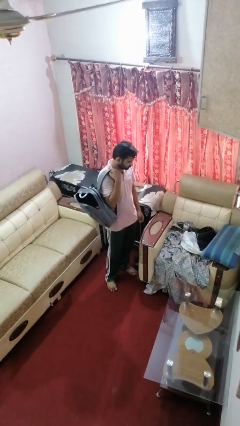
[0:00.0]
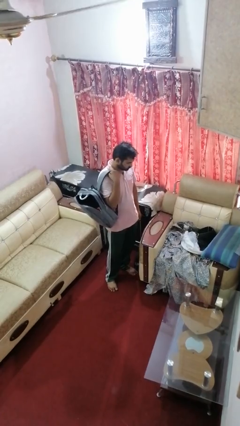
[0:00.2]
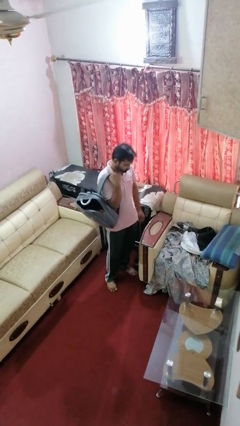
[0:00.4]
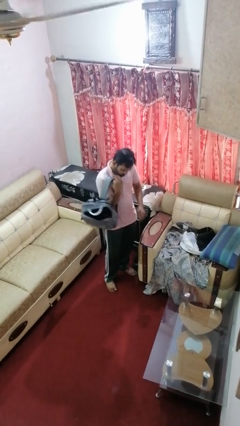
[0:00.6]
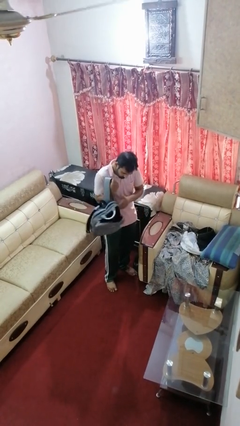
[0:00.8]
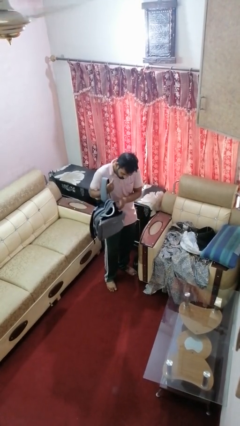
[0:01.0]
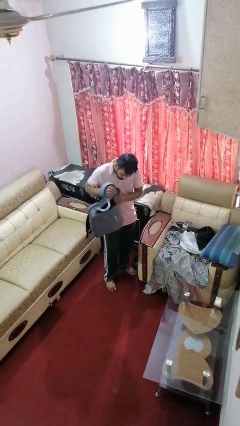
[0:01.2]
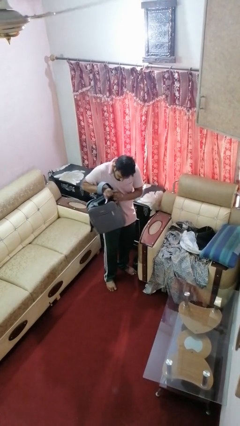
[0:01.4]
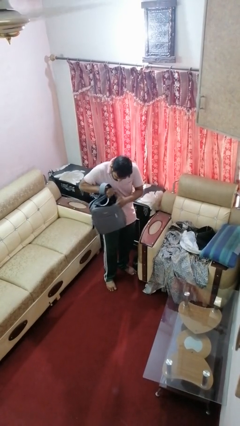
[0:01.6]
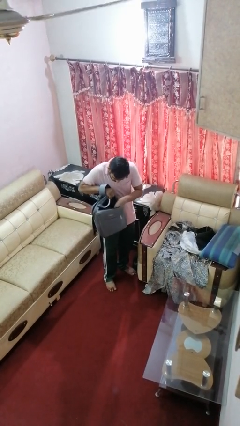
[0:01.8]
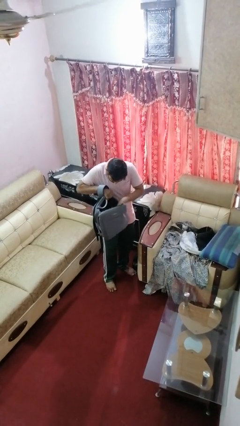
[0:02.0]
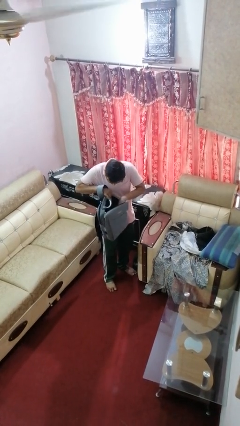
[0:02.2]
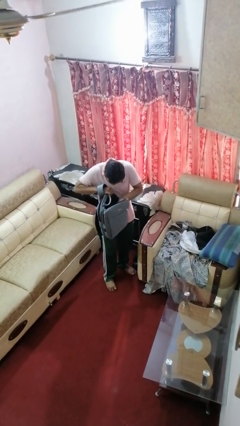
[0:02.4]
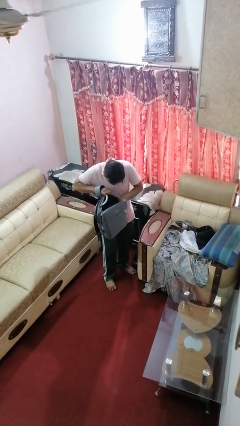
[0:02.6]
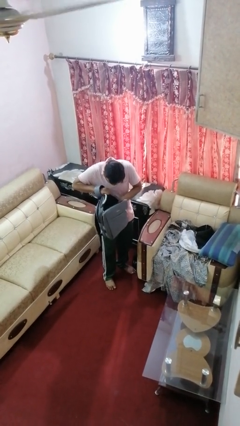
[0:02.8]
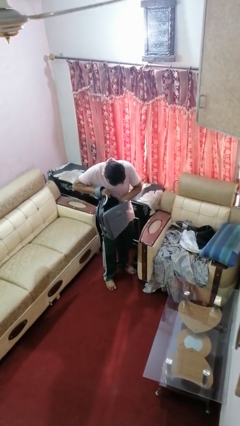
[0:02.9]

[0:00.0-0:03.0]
person searches in backpack

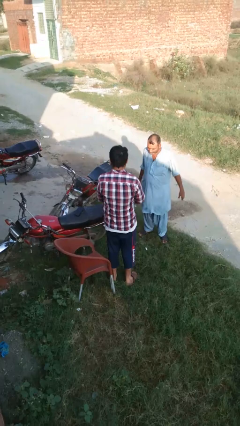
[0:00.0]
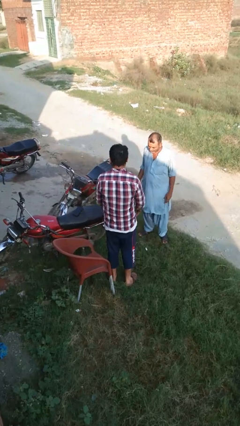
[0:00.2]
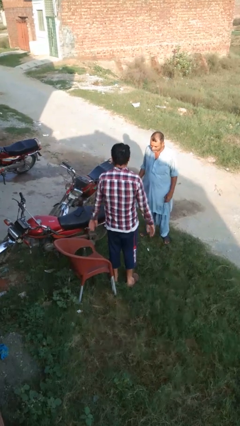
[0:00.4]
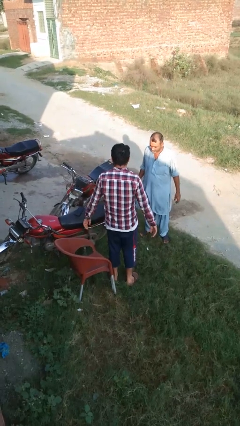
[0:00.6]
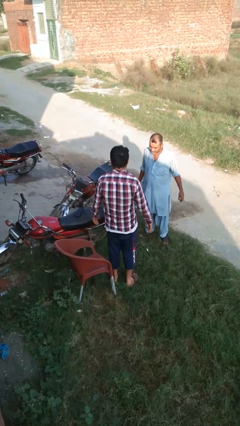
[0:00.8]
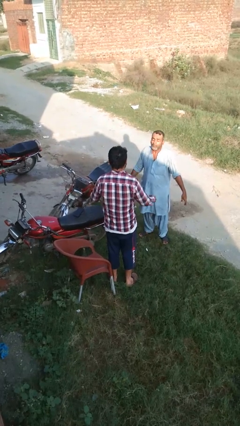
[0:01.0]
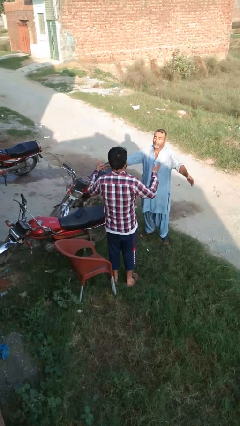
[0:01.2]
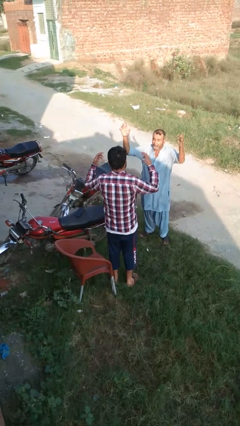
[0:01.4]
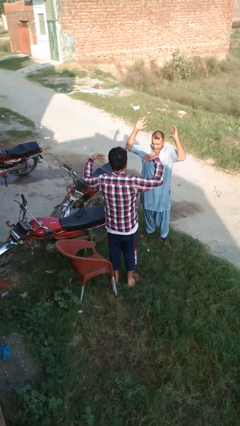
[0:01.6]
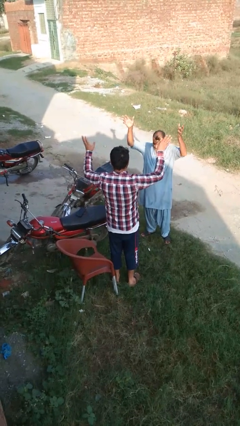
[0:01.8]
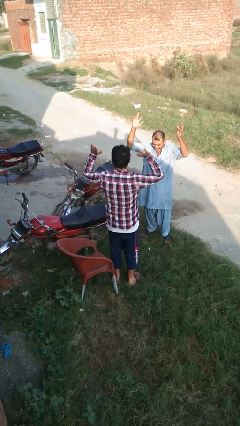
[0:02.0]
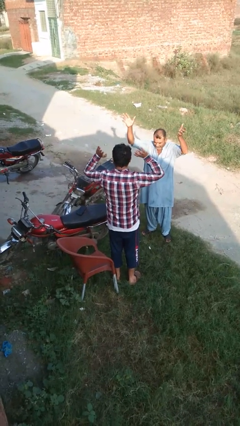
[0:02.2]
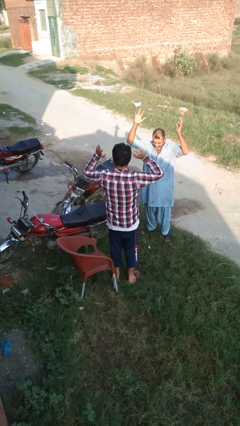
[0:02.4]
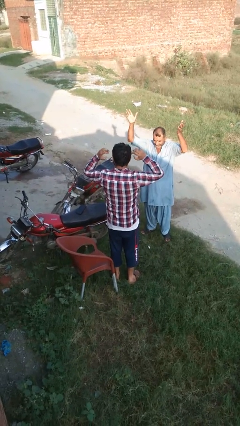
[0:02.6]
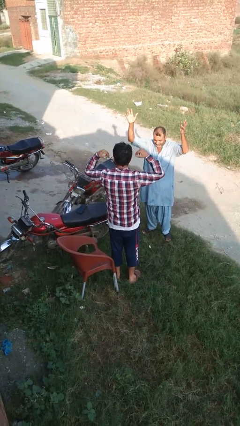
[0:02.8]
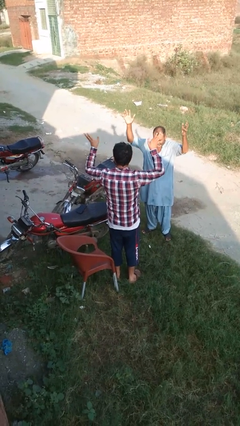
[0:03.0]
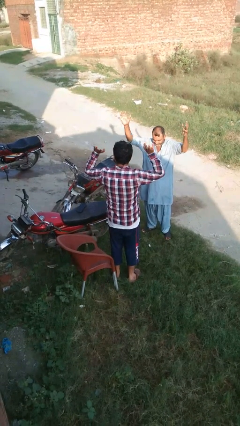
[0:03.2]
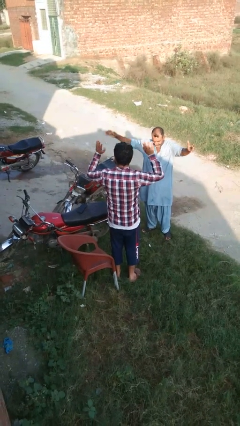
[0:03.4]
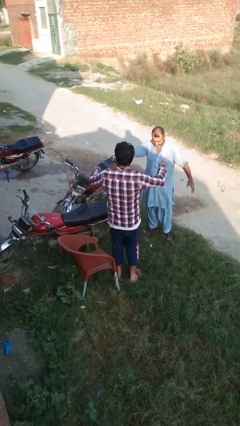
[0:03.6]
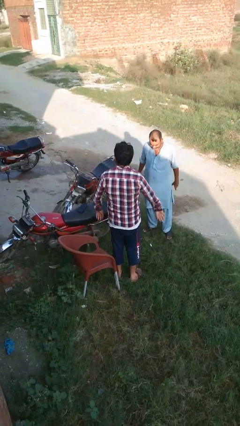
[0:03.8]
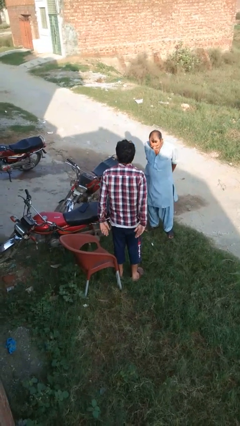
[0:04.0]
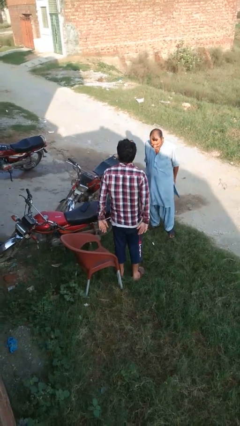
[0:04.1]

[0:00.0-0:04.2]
person laughs with person

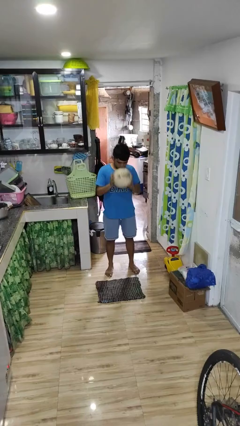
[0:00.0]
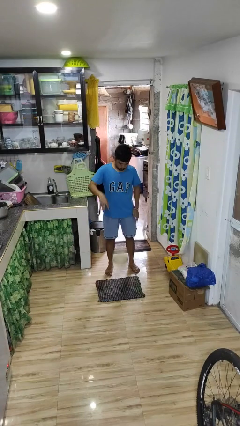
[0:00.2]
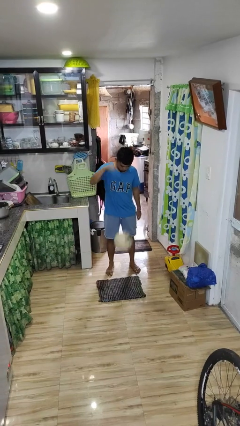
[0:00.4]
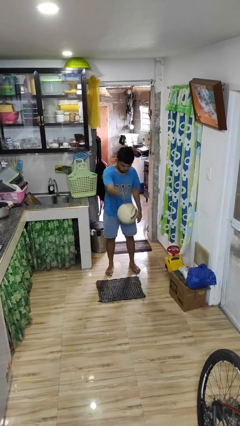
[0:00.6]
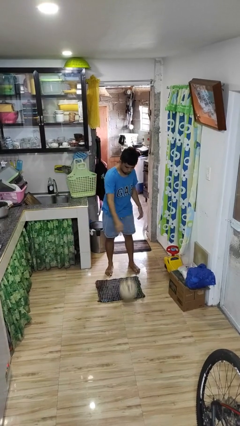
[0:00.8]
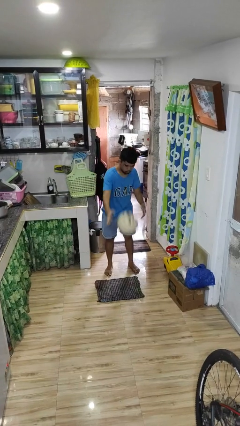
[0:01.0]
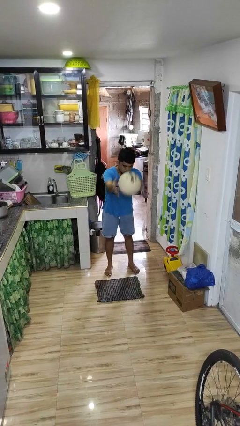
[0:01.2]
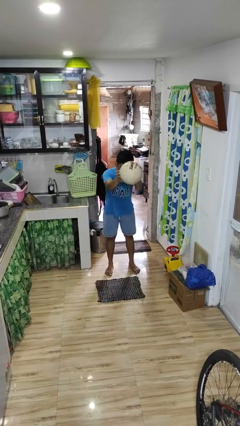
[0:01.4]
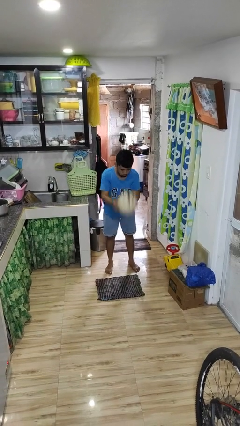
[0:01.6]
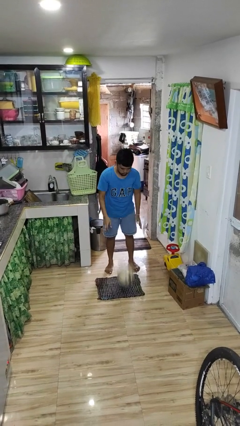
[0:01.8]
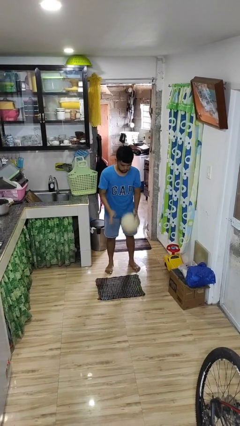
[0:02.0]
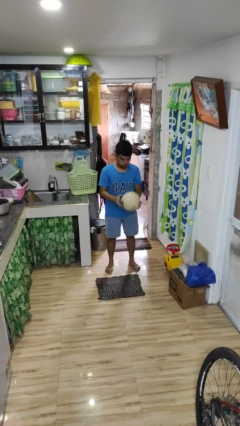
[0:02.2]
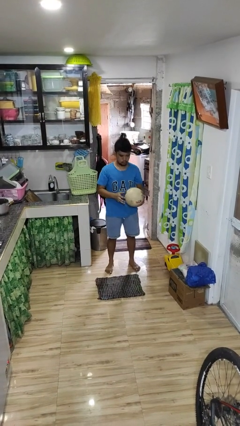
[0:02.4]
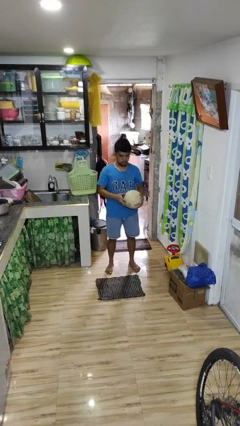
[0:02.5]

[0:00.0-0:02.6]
person bounces ball on floor

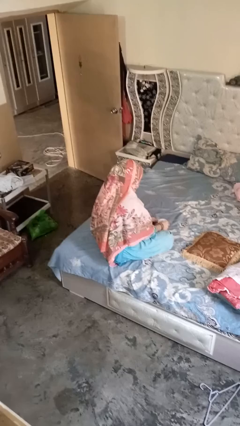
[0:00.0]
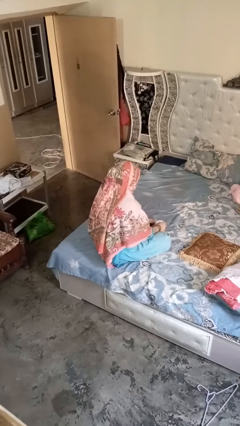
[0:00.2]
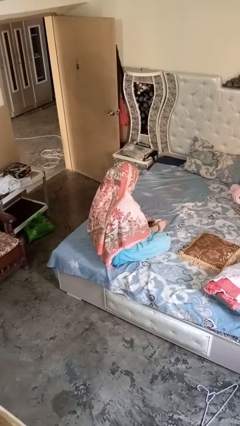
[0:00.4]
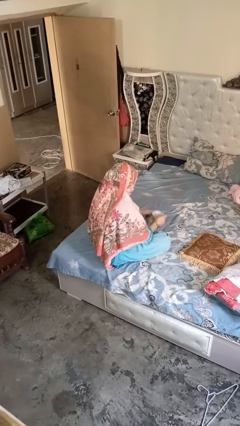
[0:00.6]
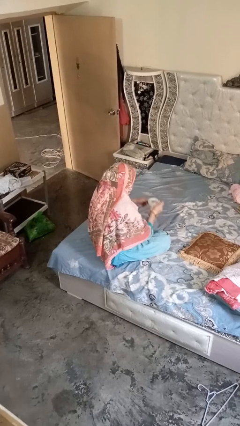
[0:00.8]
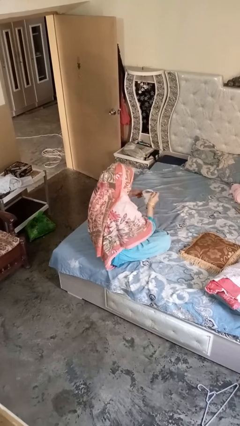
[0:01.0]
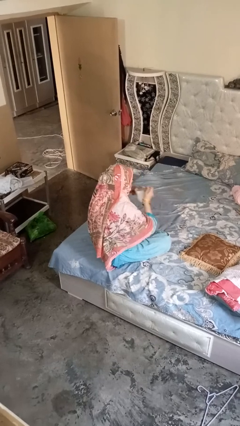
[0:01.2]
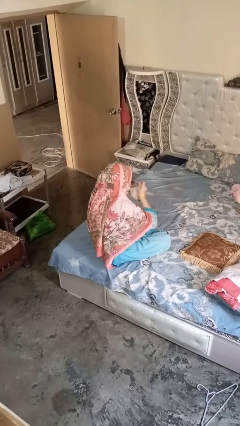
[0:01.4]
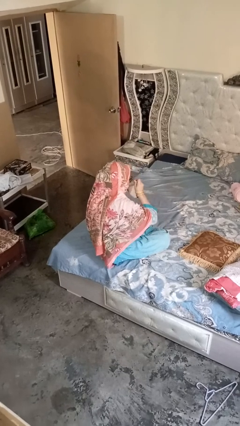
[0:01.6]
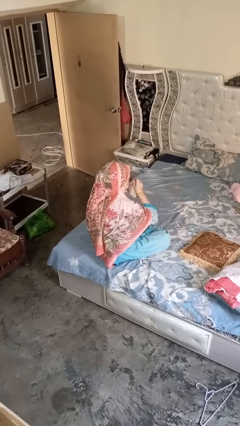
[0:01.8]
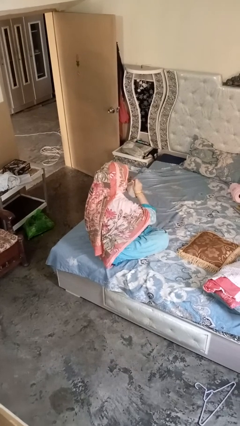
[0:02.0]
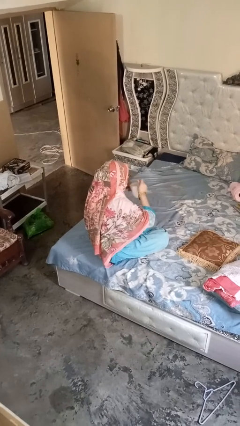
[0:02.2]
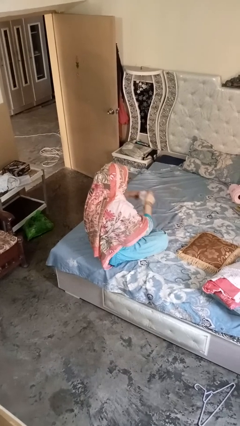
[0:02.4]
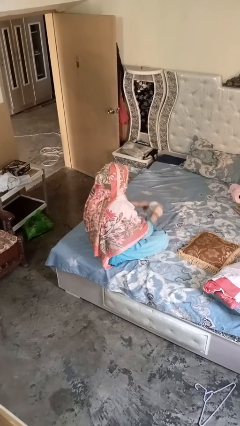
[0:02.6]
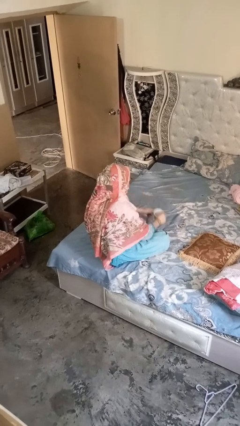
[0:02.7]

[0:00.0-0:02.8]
person drinks from mug

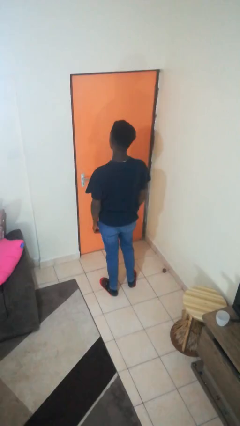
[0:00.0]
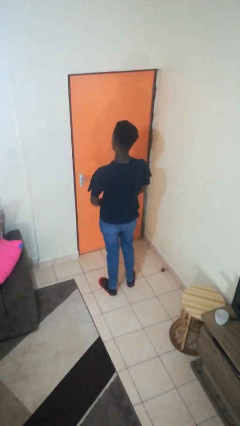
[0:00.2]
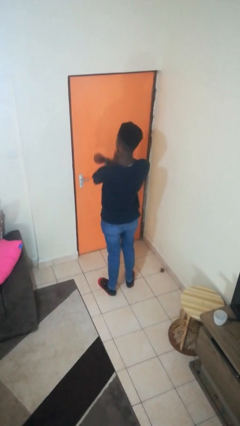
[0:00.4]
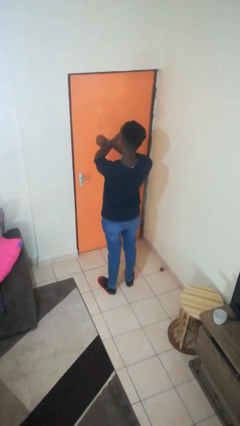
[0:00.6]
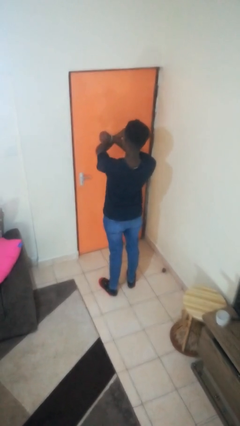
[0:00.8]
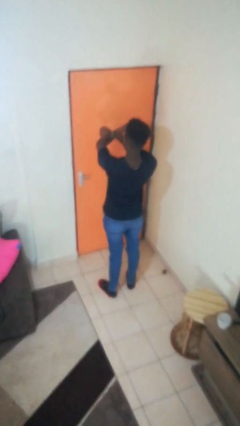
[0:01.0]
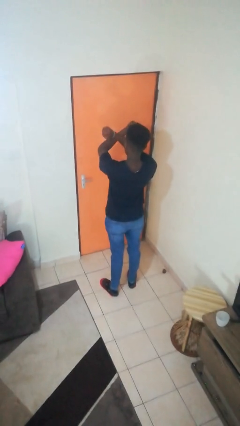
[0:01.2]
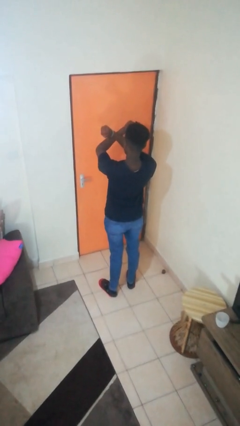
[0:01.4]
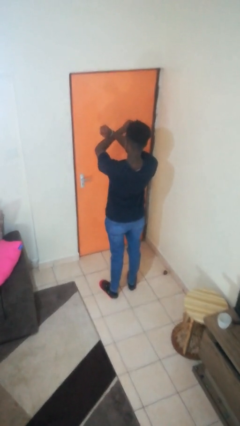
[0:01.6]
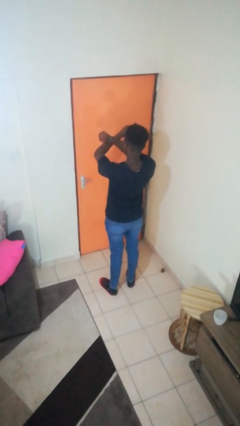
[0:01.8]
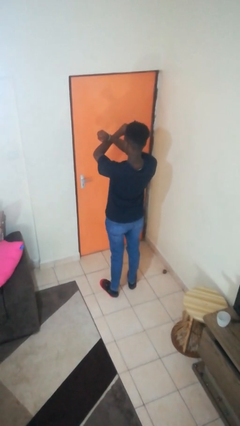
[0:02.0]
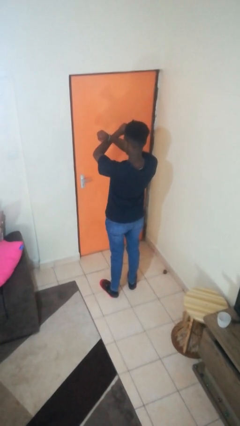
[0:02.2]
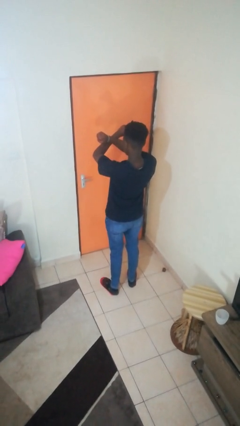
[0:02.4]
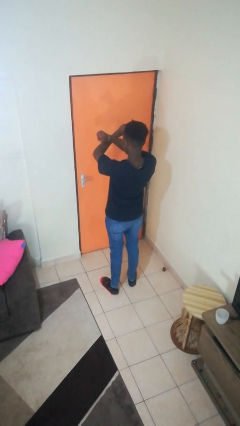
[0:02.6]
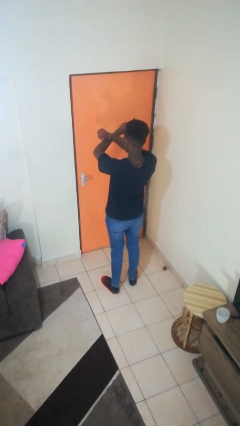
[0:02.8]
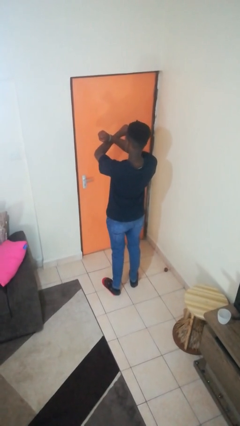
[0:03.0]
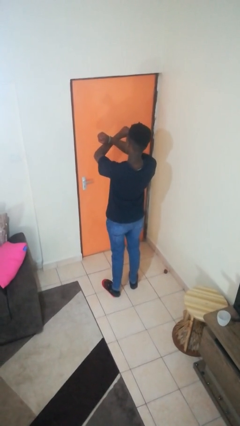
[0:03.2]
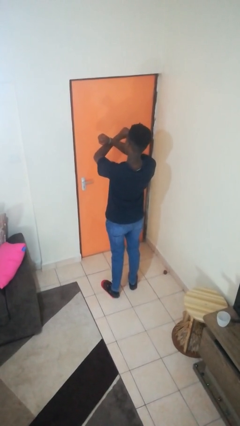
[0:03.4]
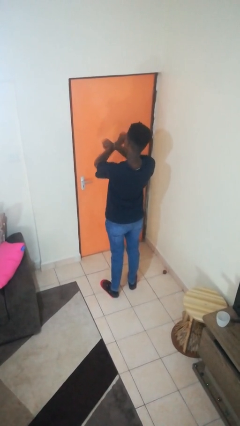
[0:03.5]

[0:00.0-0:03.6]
person gestures arms x

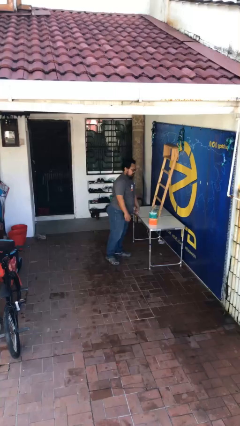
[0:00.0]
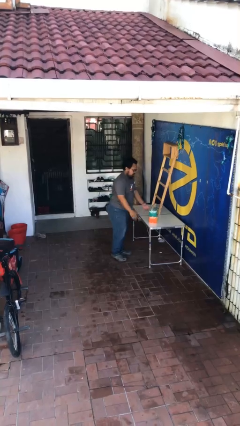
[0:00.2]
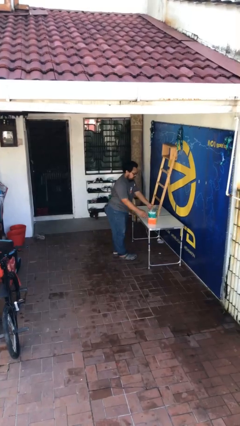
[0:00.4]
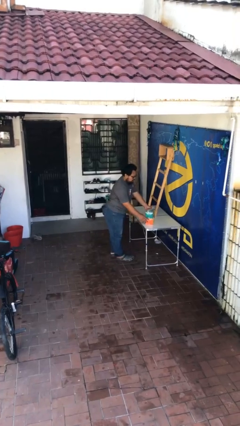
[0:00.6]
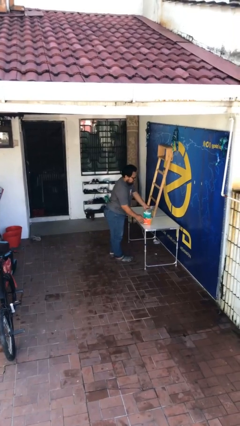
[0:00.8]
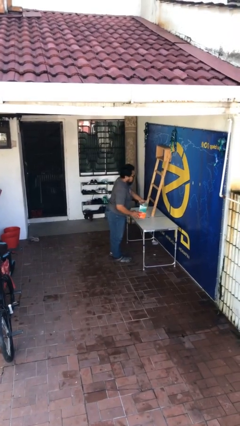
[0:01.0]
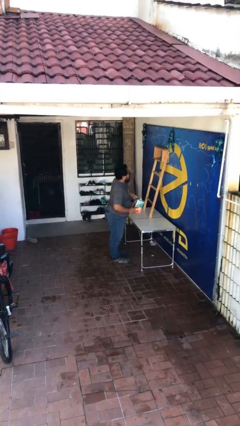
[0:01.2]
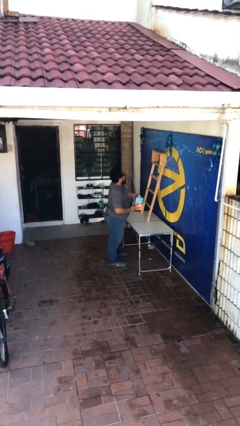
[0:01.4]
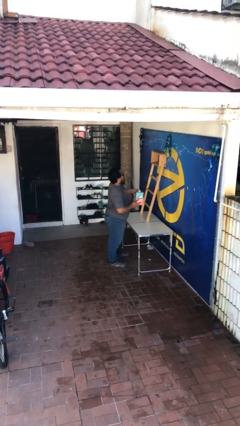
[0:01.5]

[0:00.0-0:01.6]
person picks up object from table
